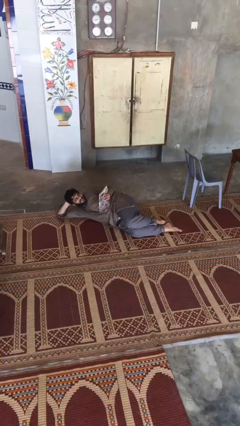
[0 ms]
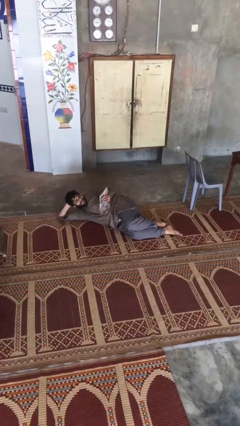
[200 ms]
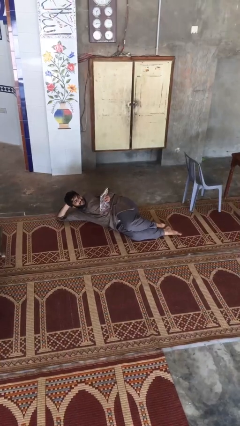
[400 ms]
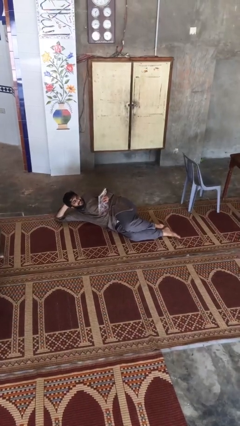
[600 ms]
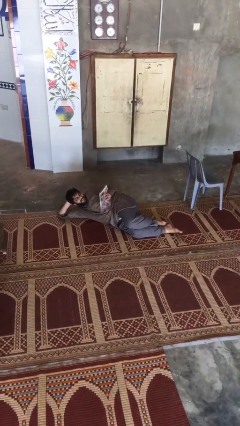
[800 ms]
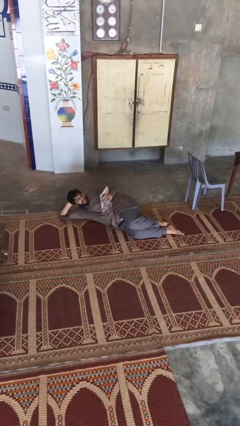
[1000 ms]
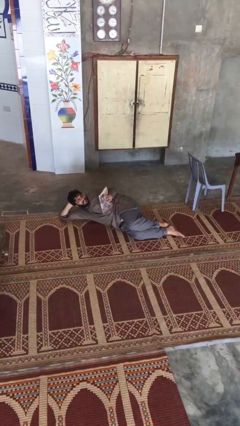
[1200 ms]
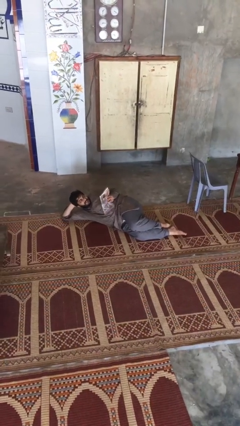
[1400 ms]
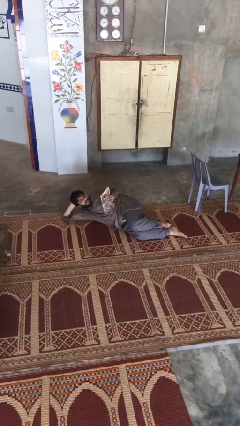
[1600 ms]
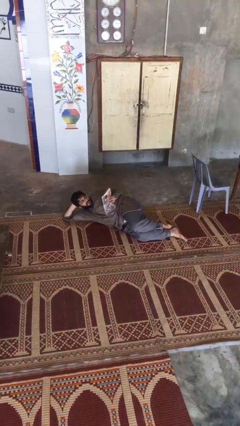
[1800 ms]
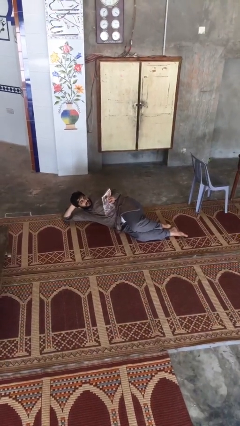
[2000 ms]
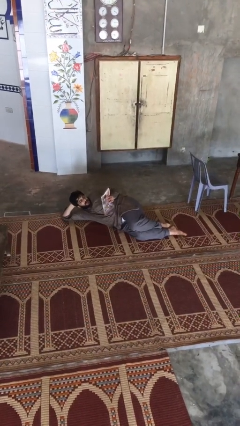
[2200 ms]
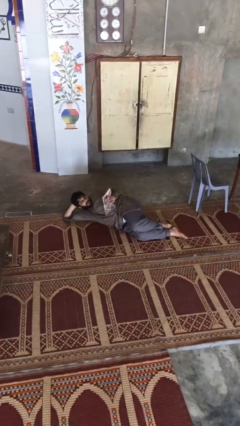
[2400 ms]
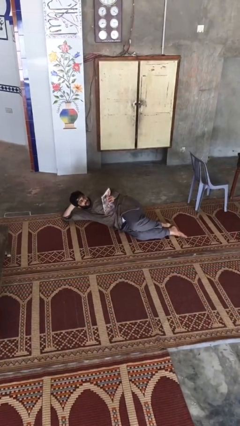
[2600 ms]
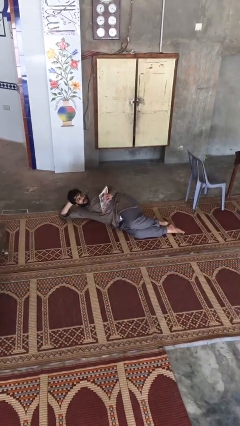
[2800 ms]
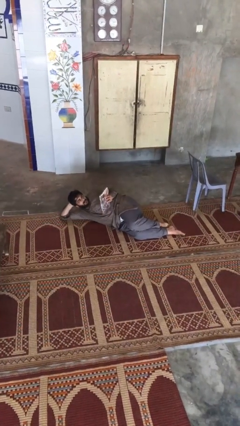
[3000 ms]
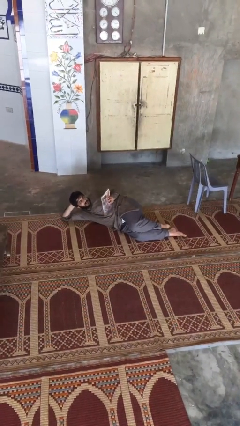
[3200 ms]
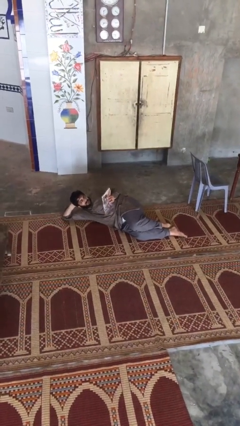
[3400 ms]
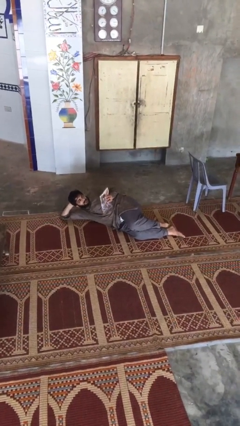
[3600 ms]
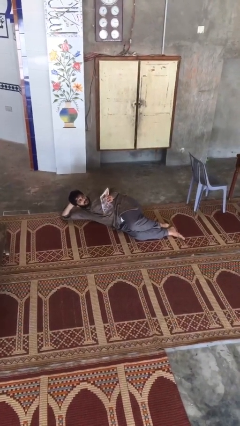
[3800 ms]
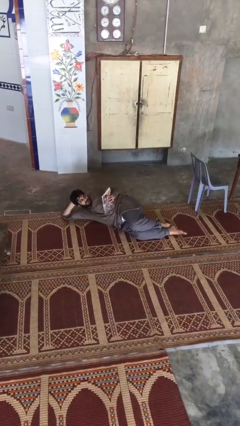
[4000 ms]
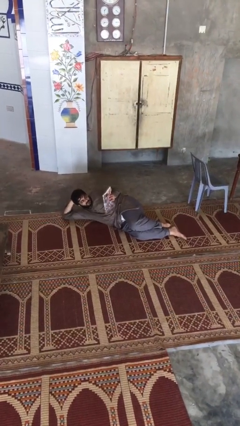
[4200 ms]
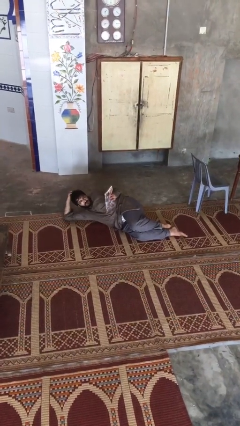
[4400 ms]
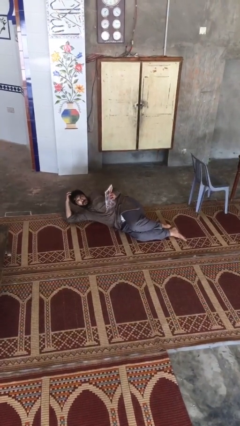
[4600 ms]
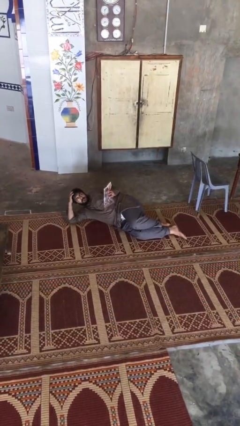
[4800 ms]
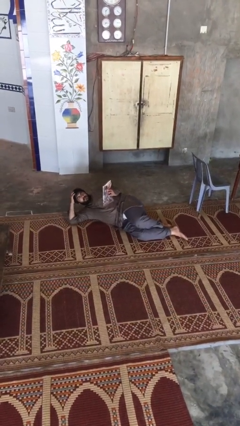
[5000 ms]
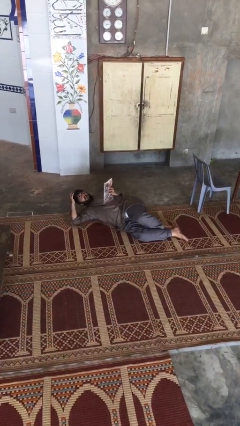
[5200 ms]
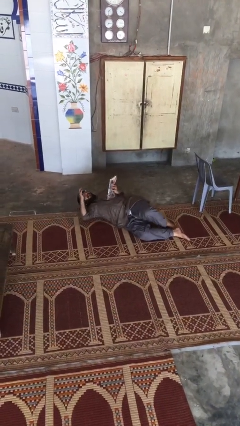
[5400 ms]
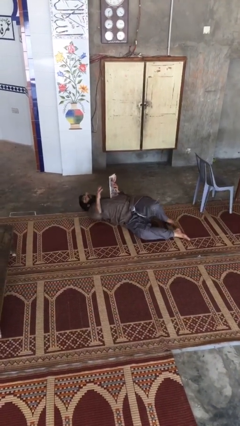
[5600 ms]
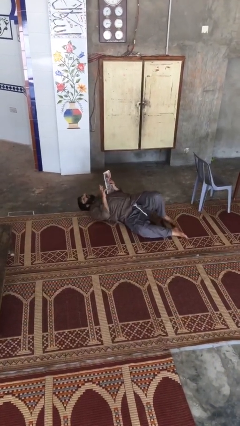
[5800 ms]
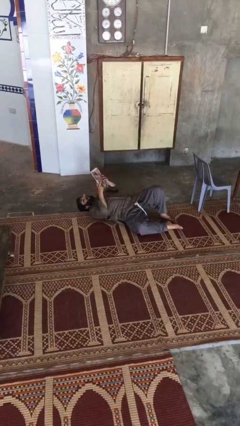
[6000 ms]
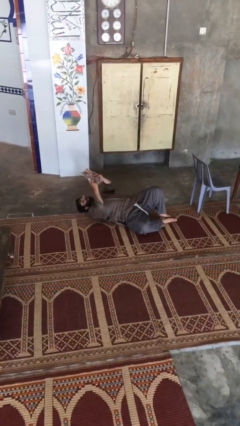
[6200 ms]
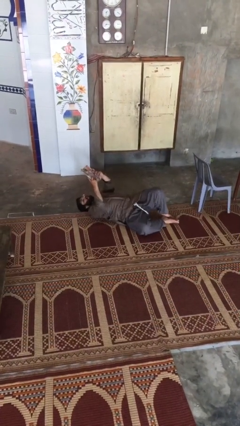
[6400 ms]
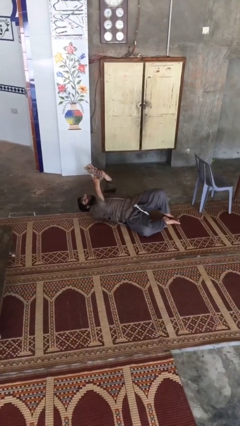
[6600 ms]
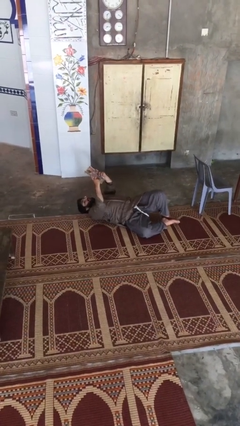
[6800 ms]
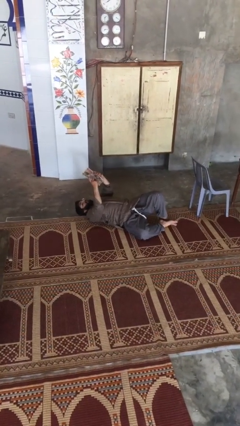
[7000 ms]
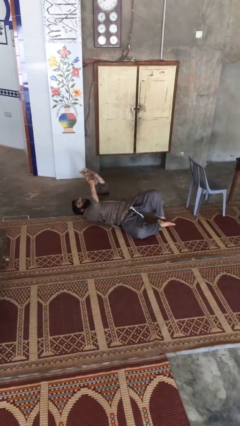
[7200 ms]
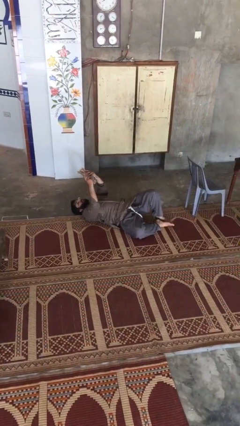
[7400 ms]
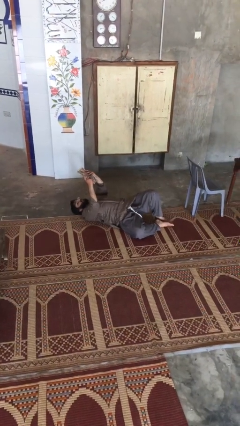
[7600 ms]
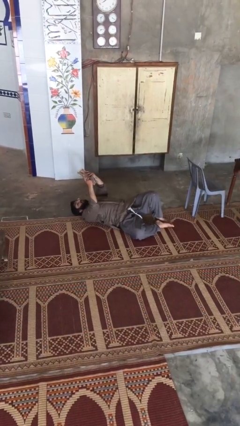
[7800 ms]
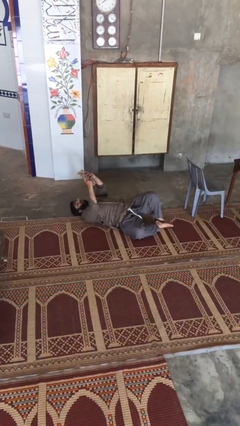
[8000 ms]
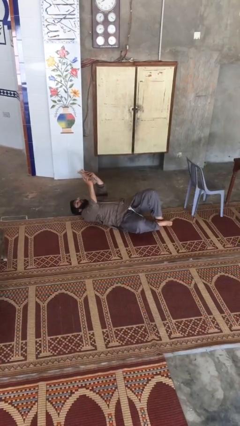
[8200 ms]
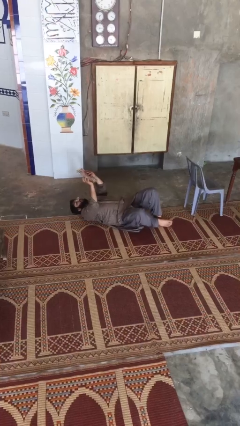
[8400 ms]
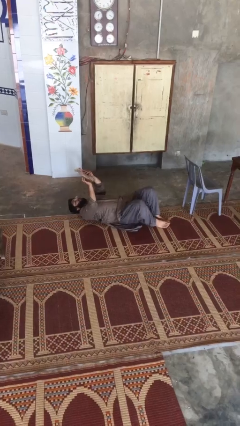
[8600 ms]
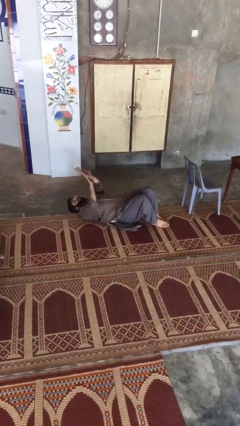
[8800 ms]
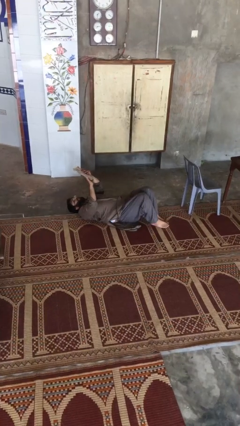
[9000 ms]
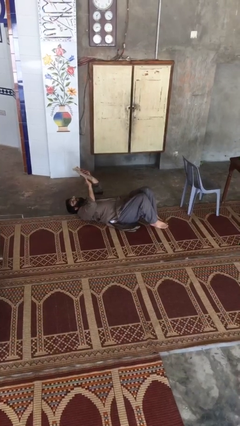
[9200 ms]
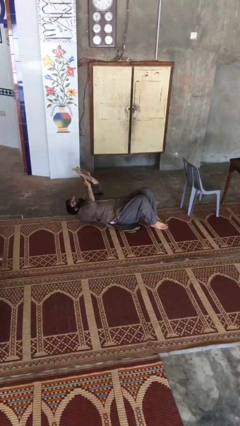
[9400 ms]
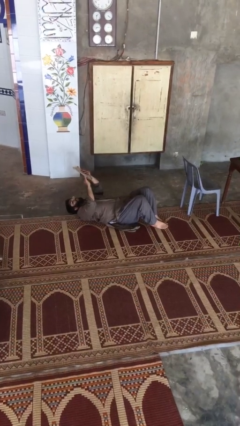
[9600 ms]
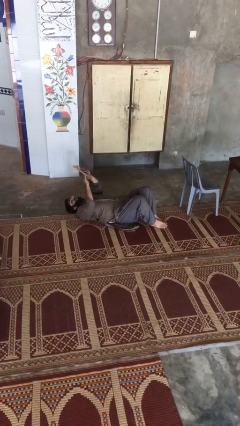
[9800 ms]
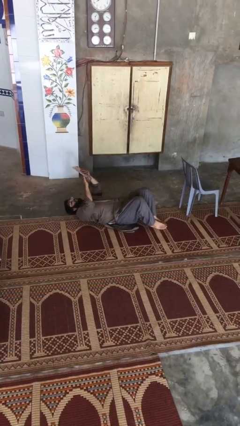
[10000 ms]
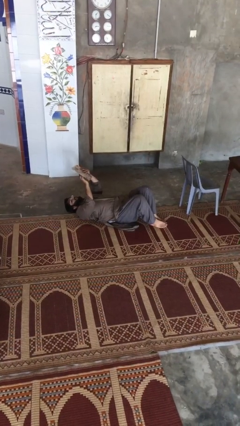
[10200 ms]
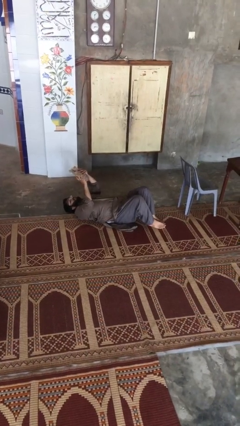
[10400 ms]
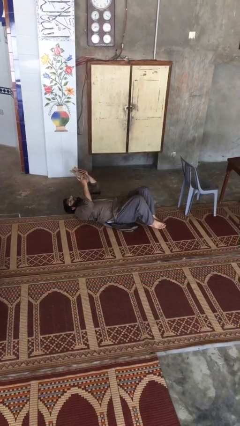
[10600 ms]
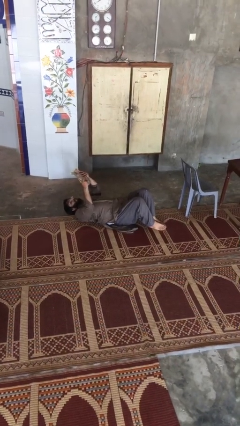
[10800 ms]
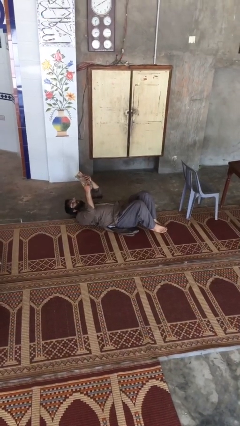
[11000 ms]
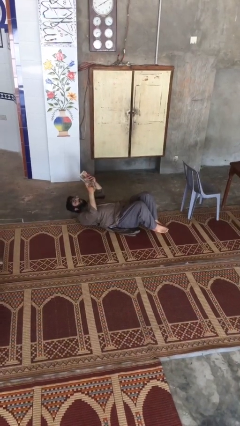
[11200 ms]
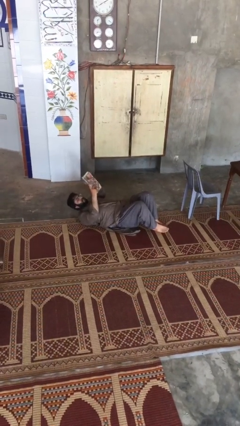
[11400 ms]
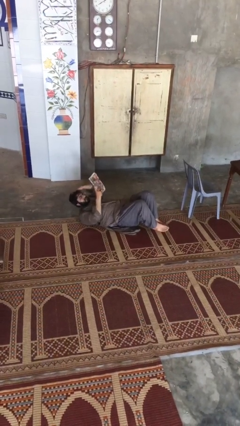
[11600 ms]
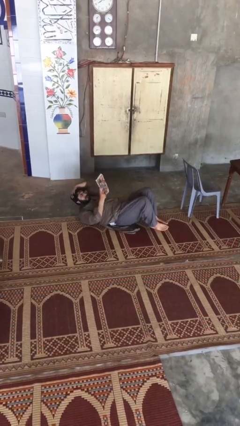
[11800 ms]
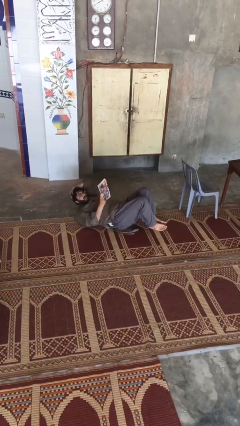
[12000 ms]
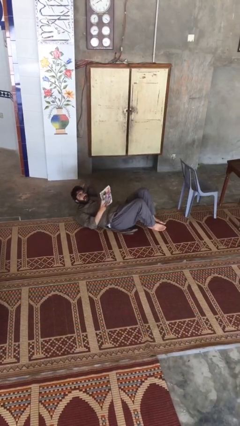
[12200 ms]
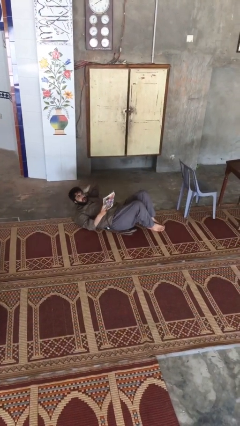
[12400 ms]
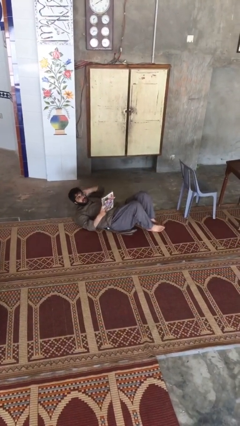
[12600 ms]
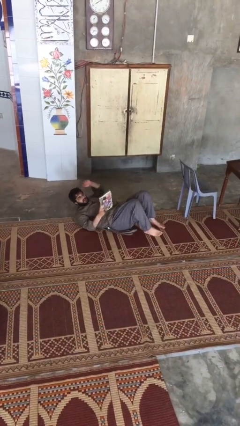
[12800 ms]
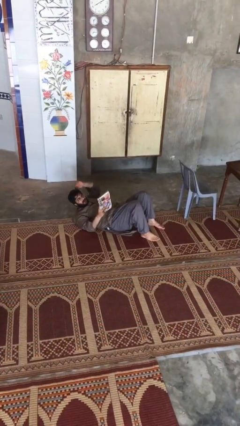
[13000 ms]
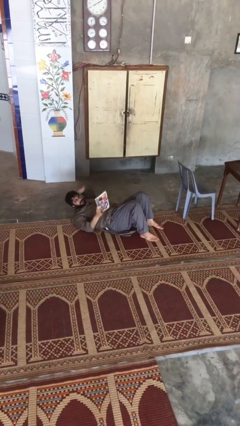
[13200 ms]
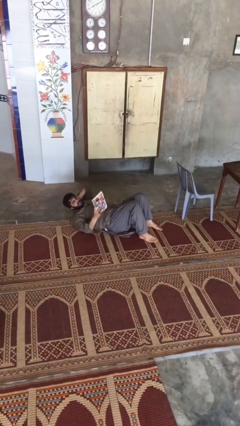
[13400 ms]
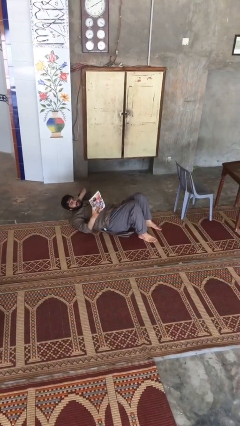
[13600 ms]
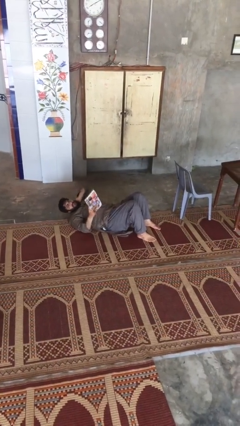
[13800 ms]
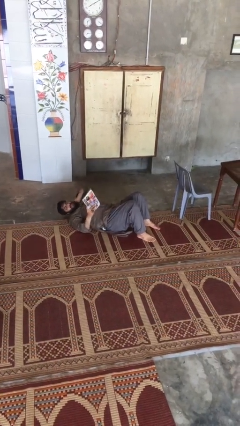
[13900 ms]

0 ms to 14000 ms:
person reads document

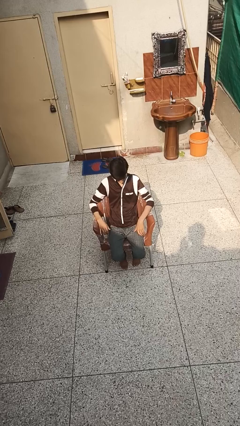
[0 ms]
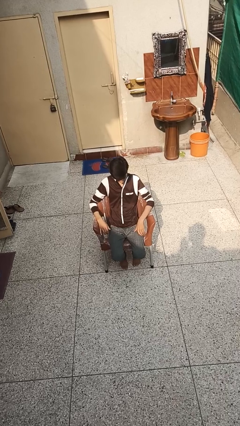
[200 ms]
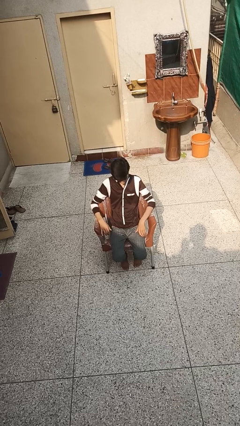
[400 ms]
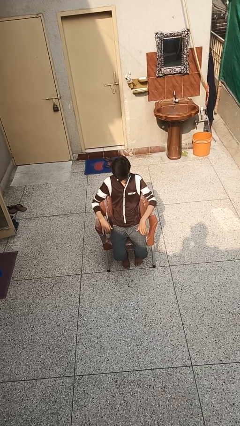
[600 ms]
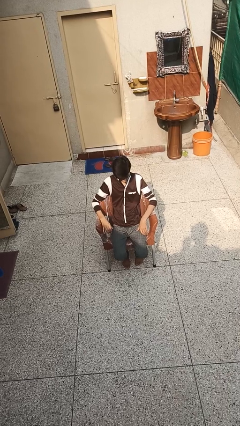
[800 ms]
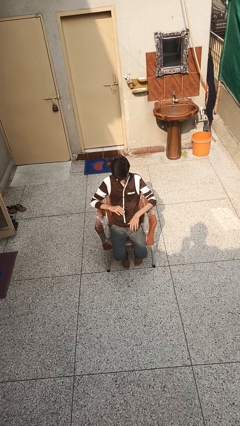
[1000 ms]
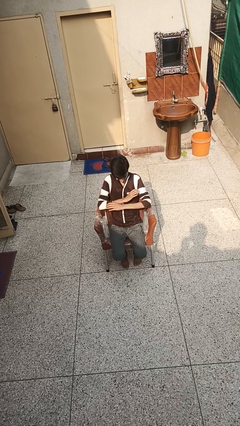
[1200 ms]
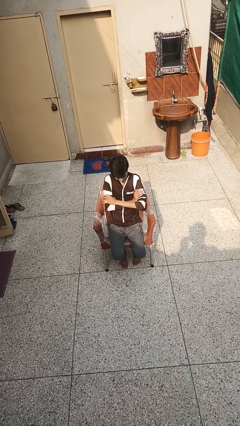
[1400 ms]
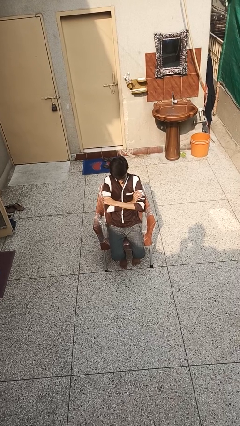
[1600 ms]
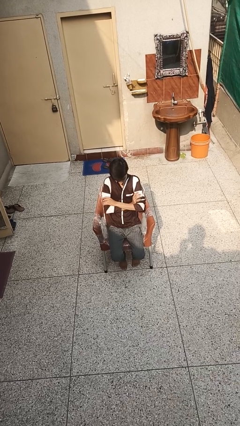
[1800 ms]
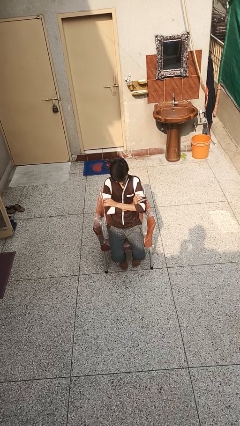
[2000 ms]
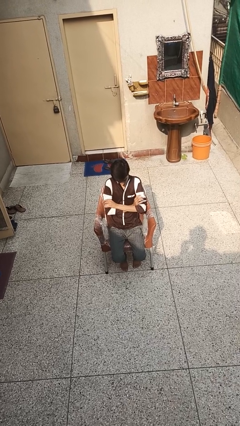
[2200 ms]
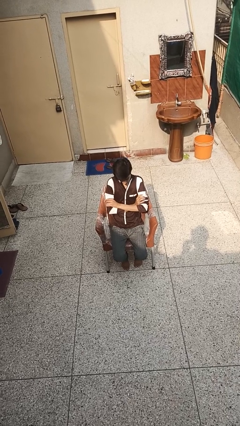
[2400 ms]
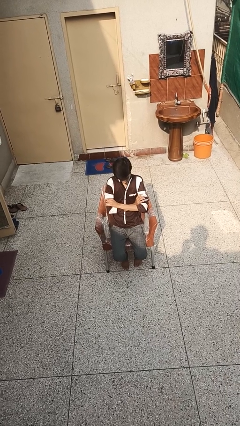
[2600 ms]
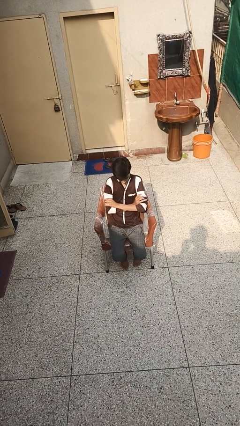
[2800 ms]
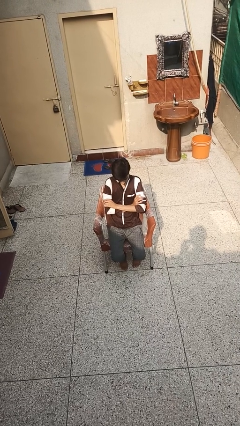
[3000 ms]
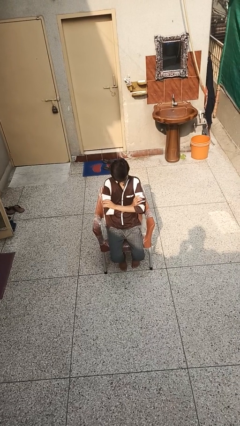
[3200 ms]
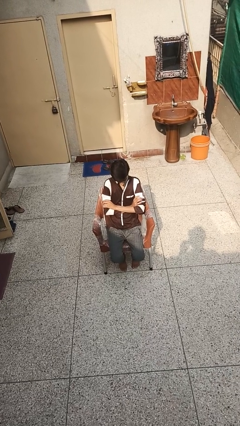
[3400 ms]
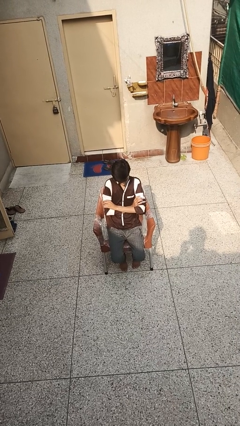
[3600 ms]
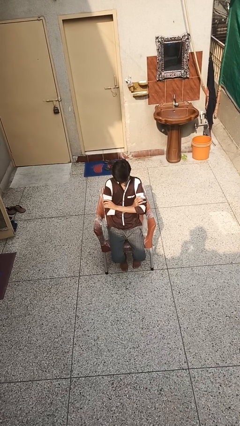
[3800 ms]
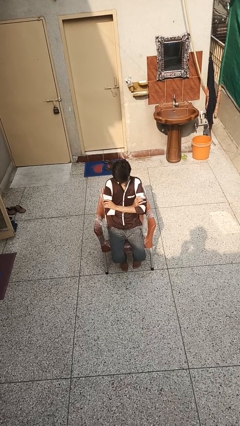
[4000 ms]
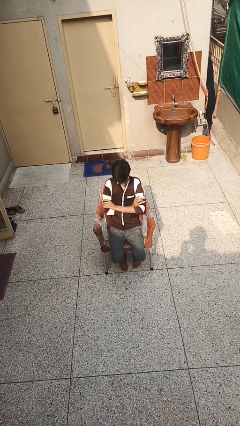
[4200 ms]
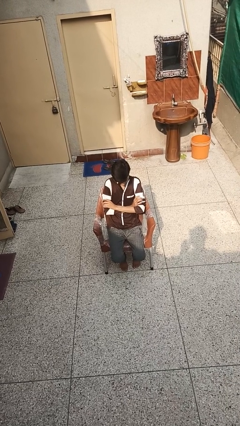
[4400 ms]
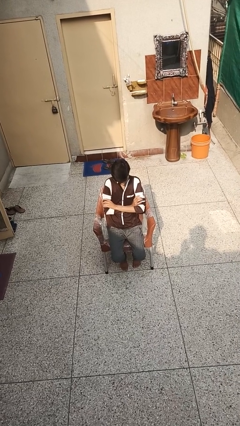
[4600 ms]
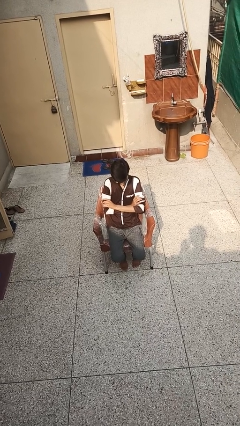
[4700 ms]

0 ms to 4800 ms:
person crosses arms
